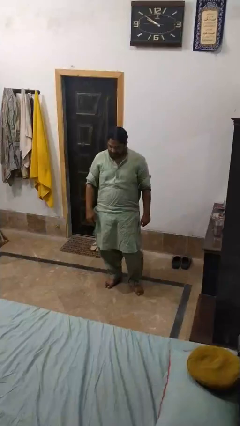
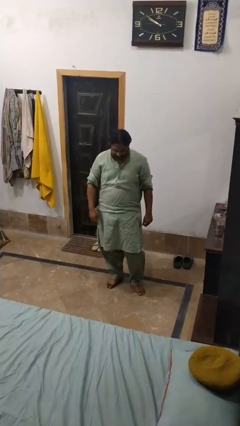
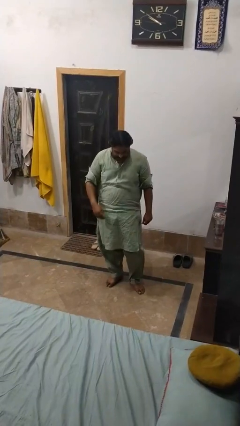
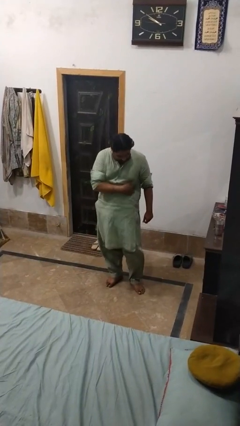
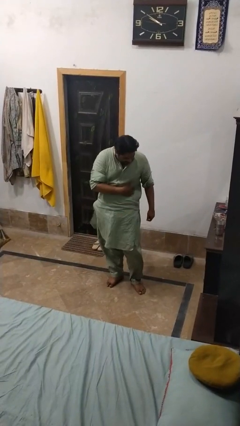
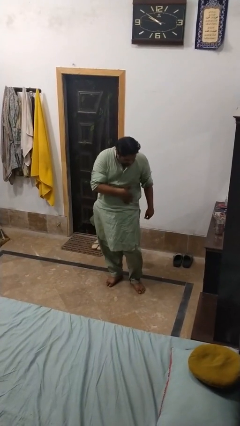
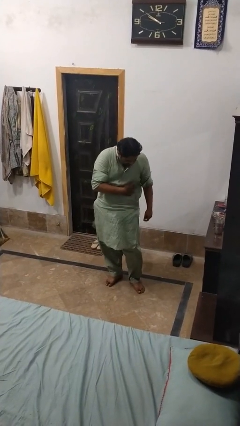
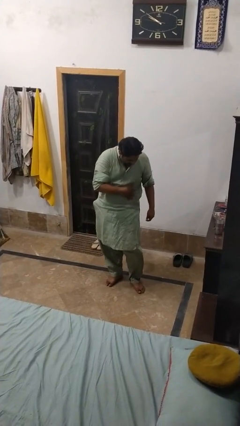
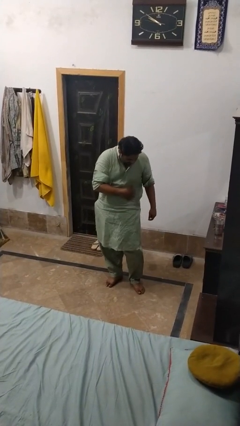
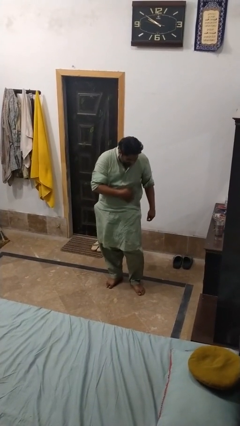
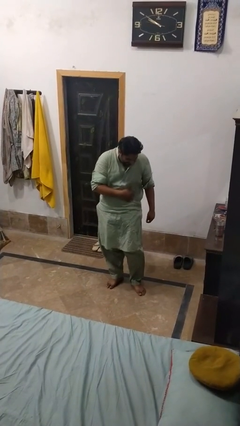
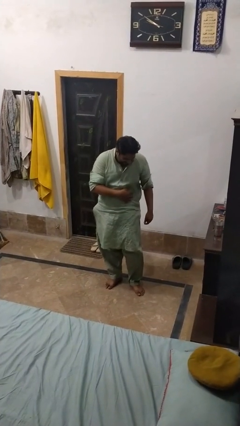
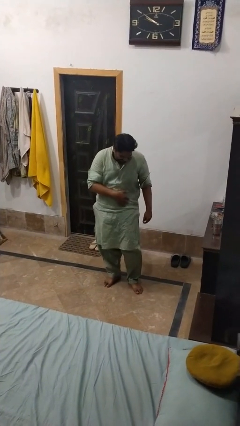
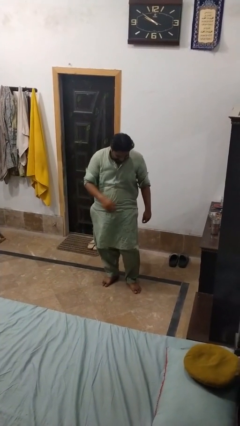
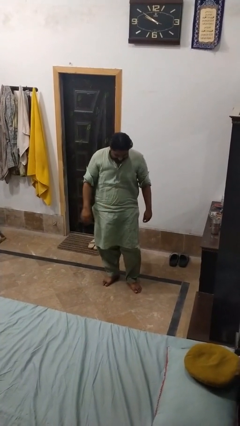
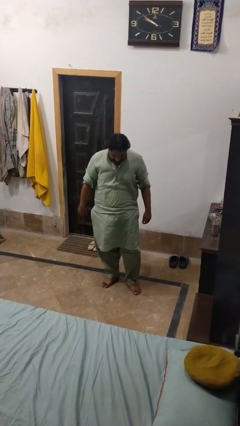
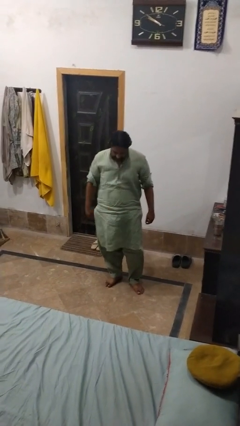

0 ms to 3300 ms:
person swats bug

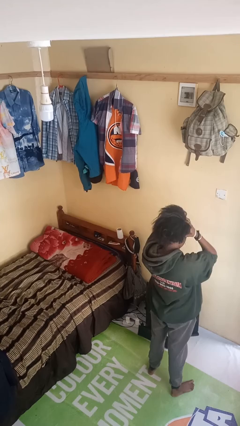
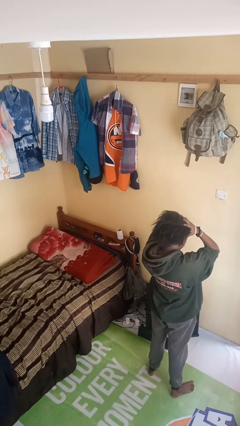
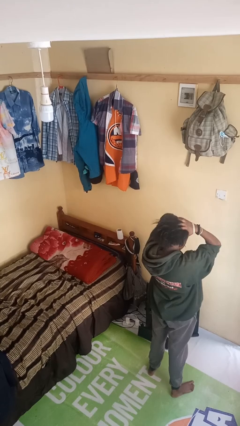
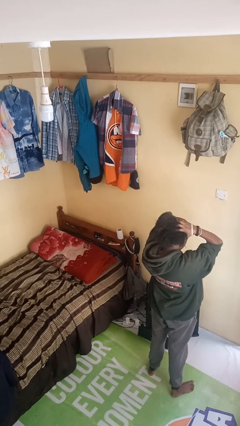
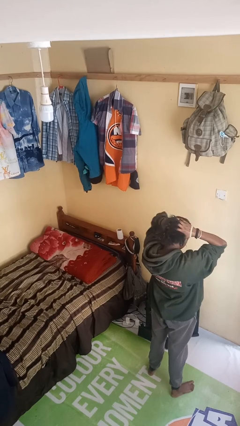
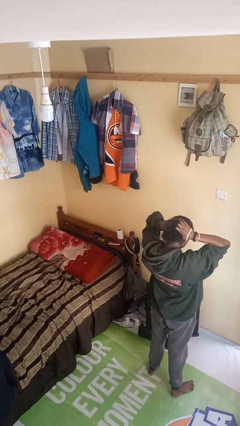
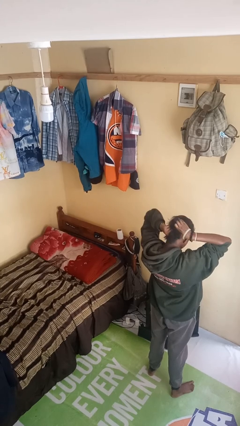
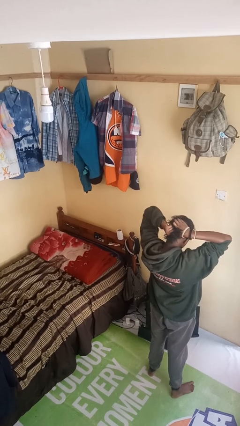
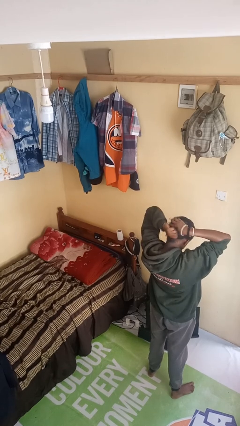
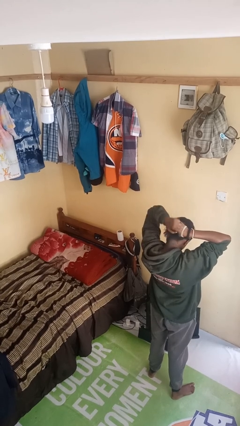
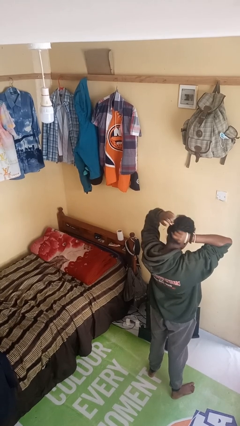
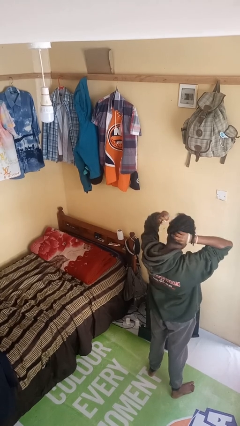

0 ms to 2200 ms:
person strokes hair

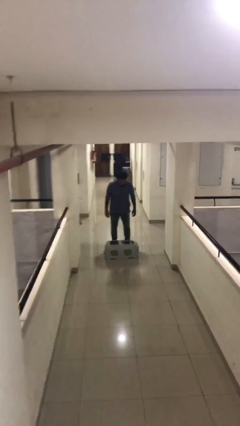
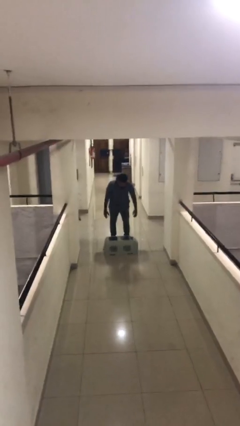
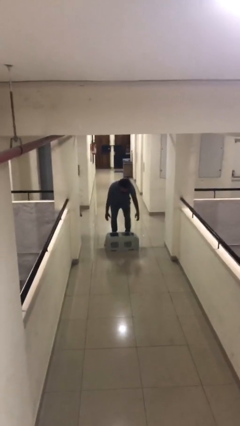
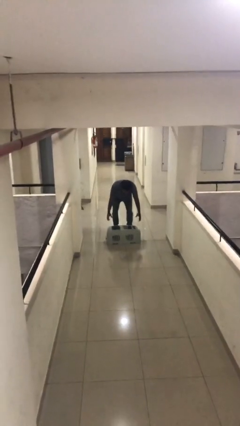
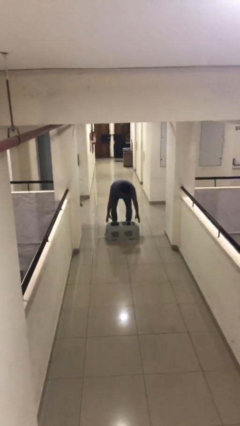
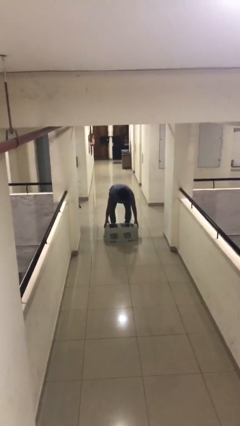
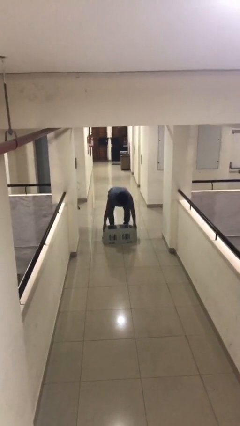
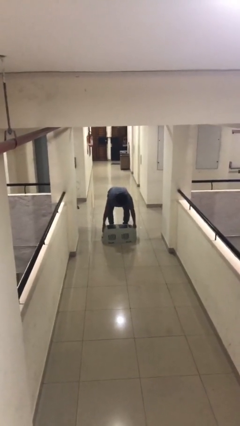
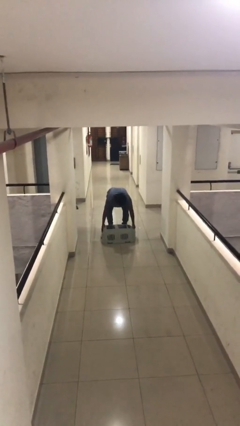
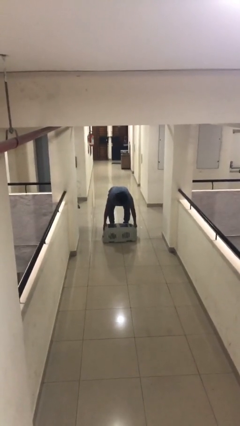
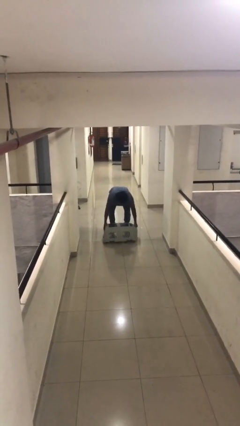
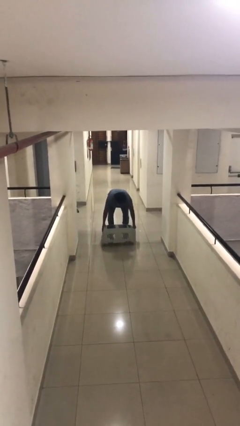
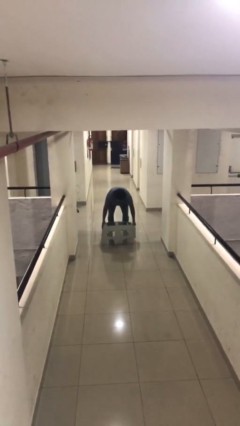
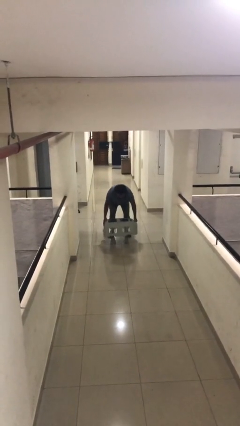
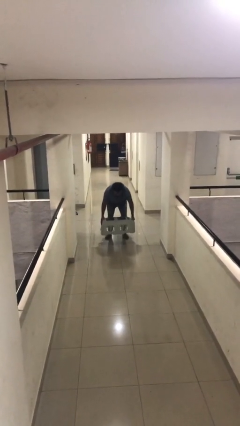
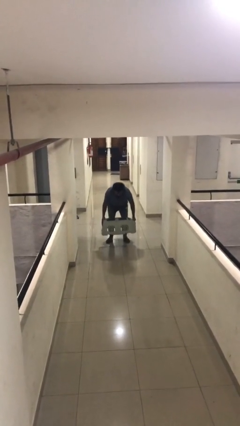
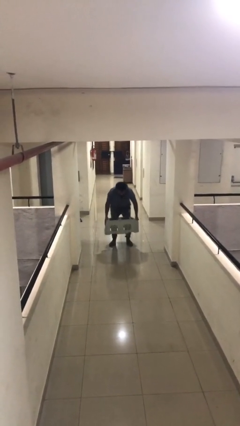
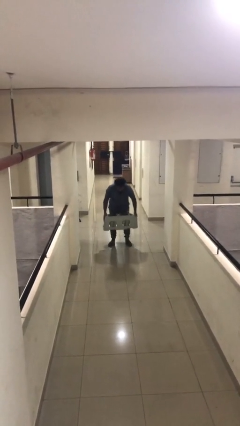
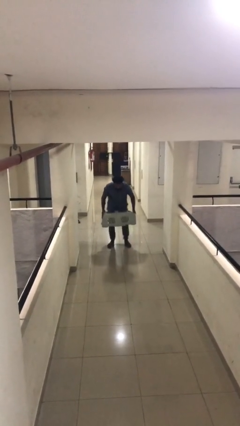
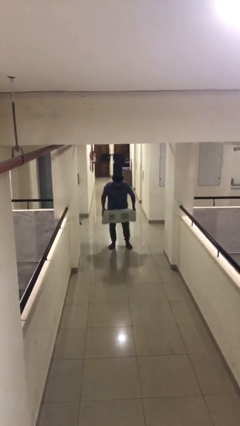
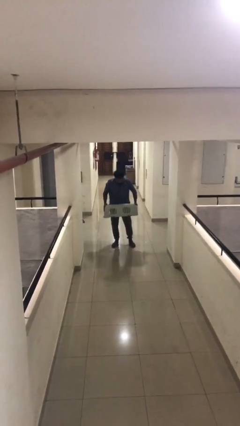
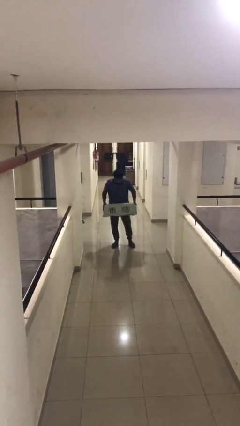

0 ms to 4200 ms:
person picks up object from floor

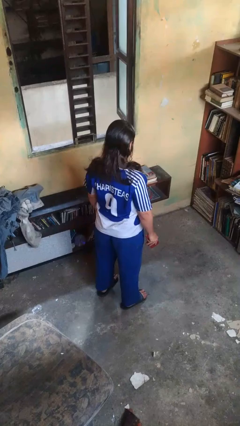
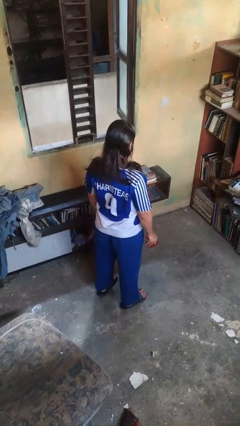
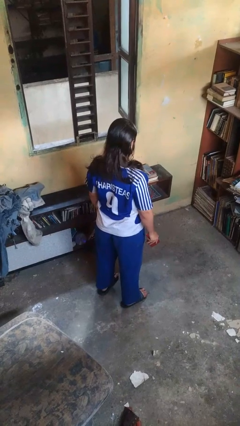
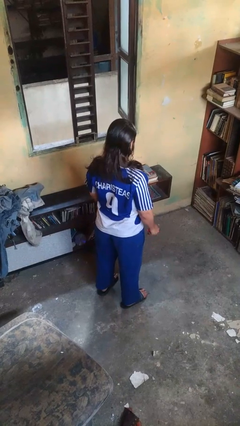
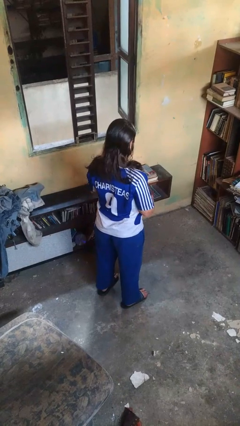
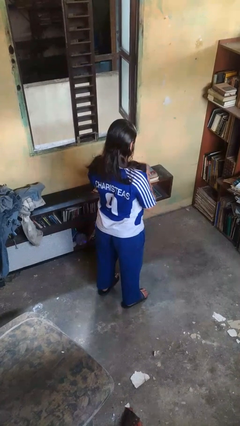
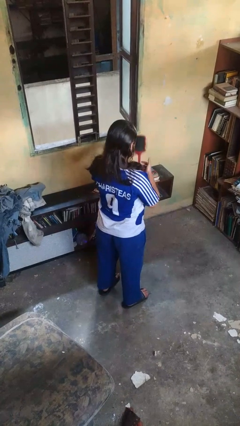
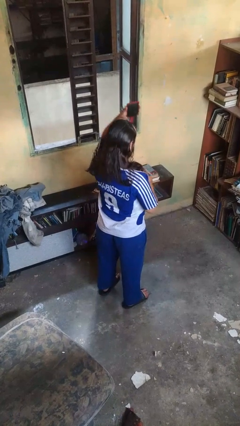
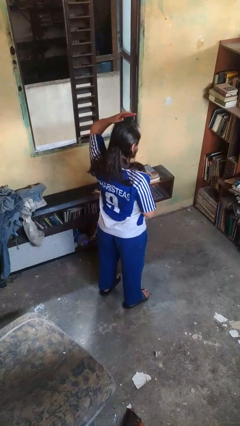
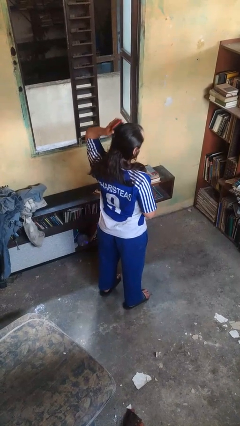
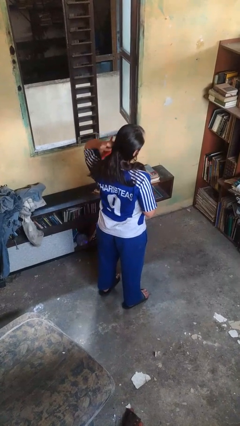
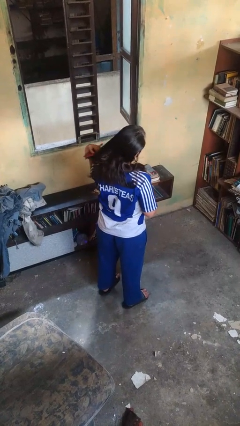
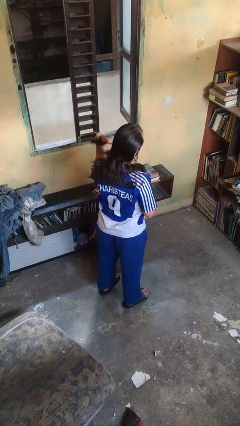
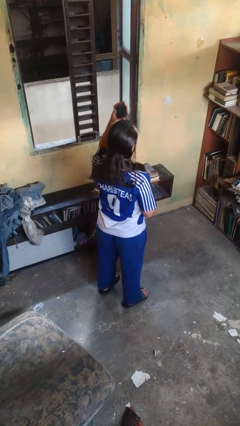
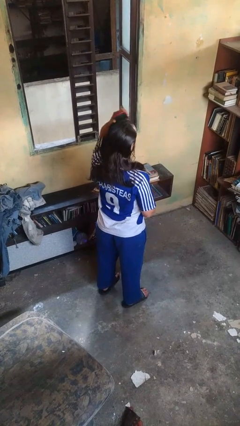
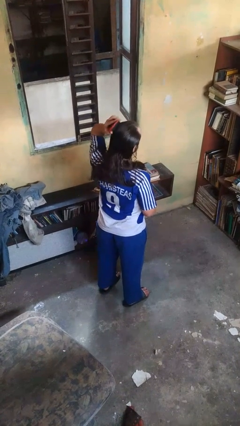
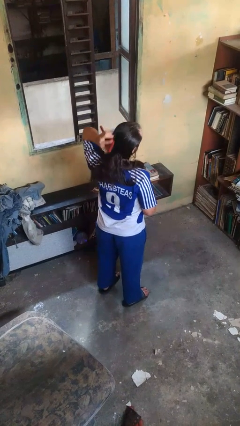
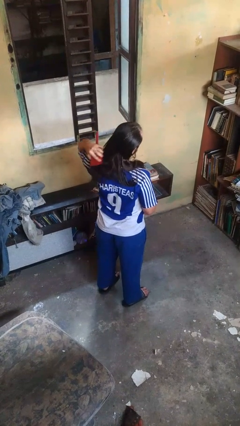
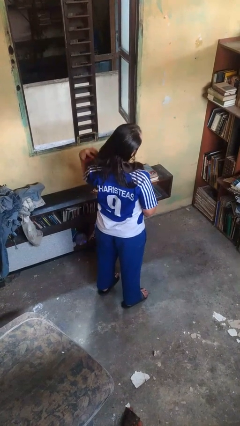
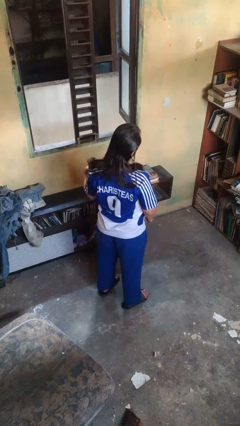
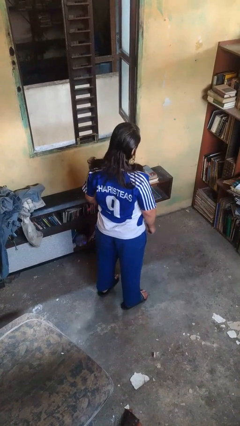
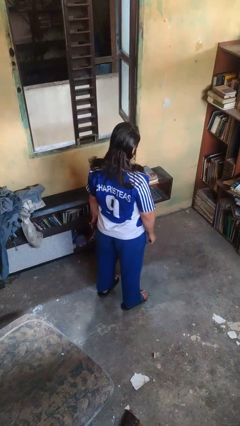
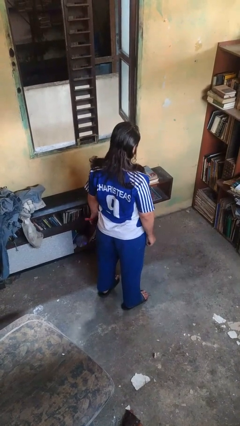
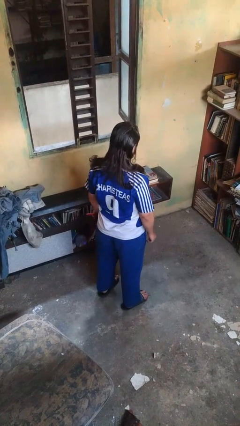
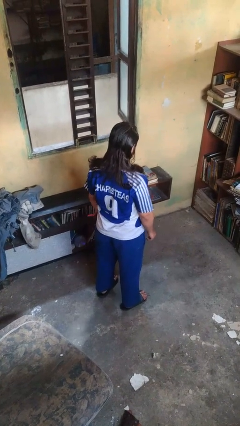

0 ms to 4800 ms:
person brushes hair

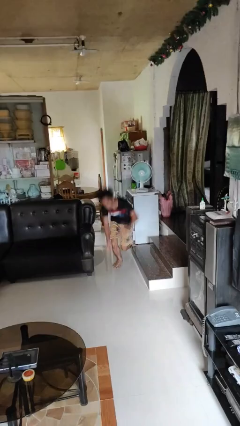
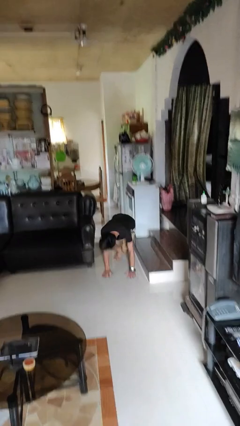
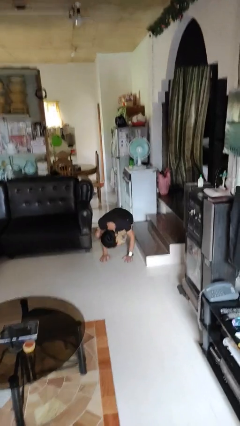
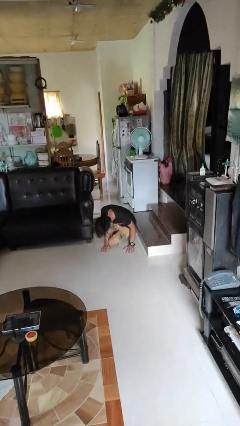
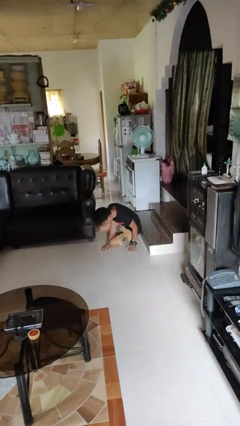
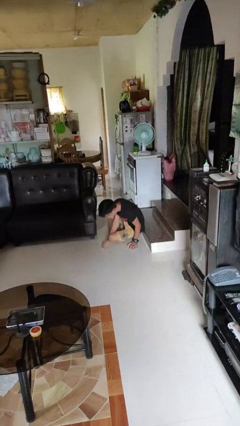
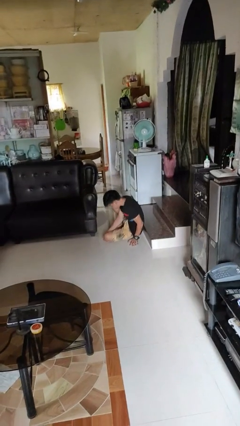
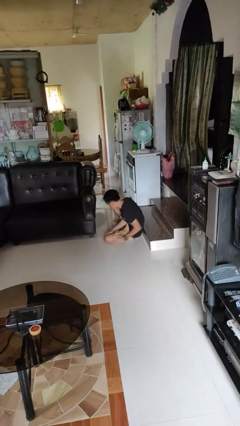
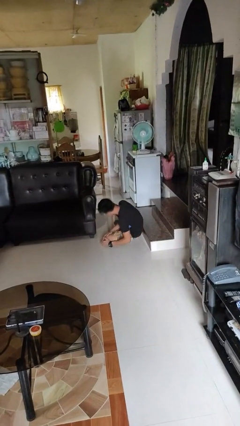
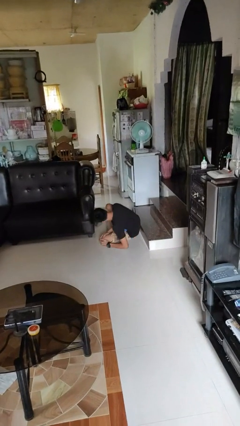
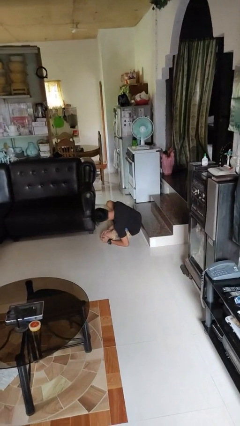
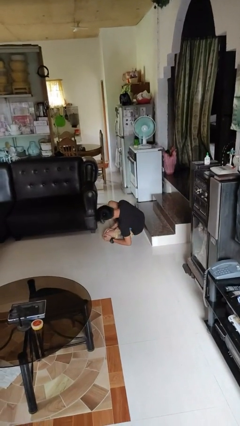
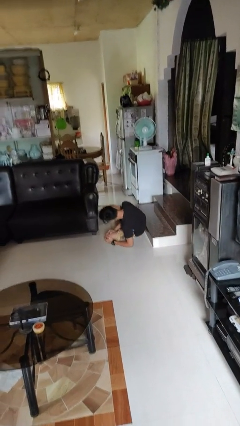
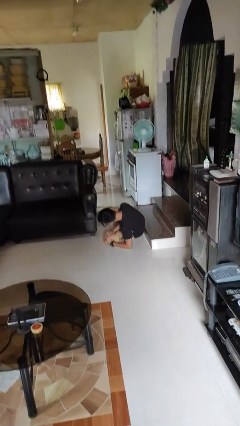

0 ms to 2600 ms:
person lies down on floor

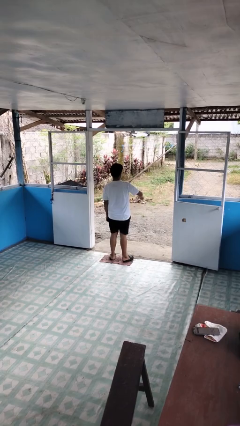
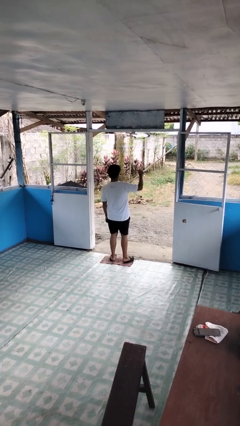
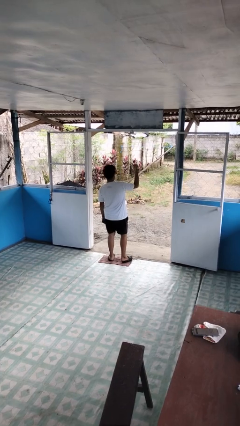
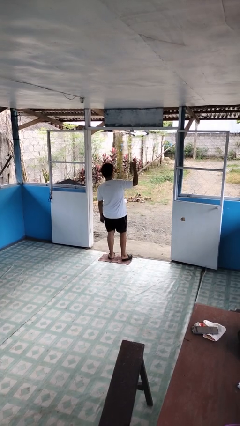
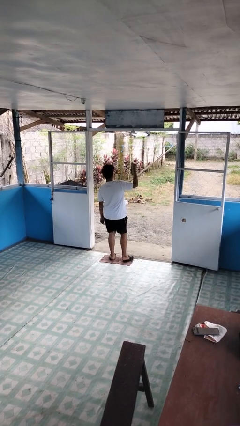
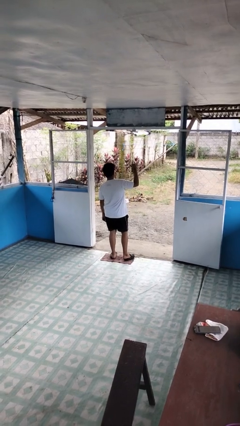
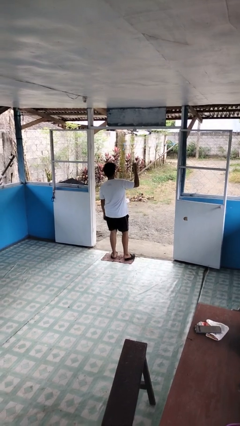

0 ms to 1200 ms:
person gestures hang loose
